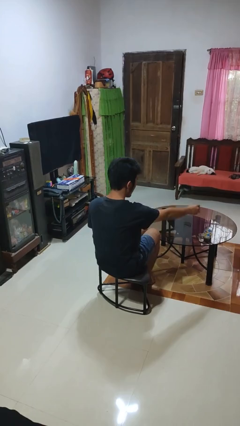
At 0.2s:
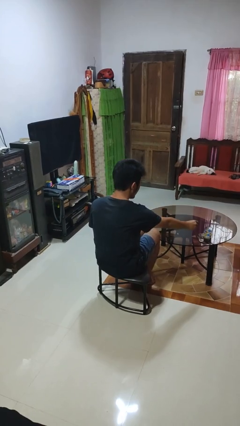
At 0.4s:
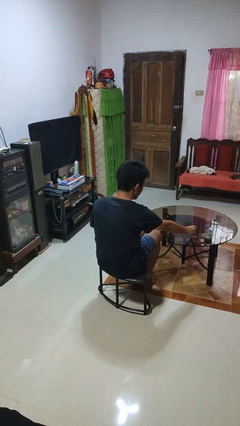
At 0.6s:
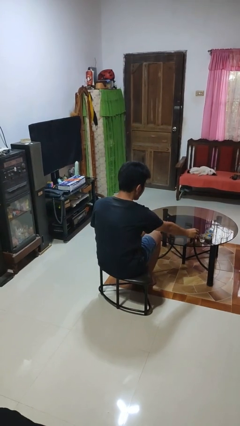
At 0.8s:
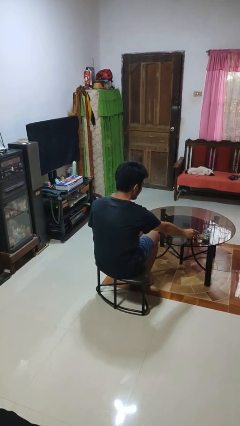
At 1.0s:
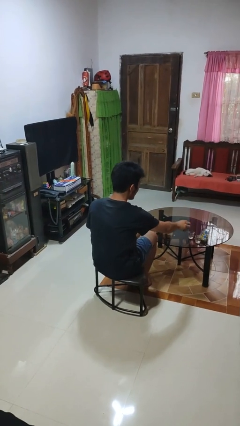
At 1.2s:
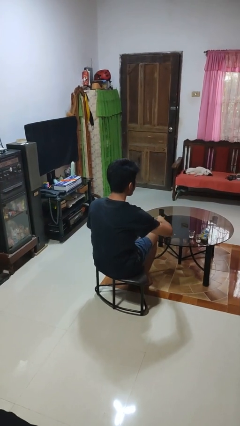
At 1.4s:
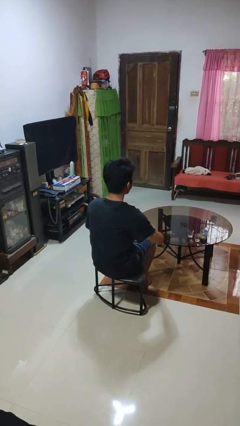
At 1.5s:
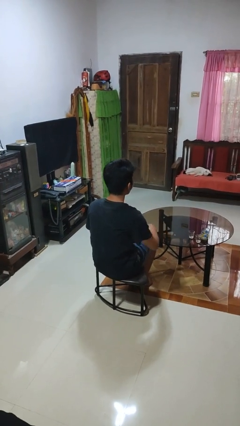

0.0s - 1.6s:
person puts down object on table

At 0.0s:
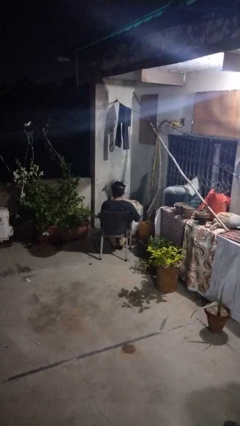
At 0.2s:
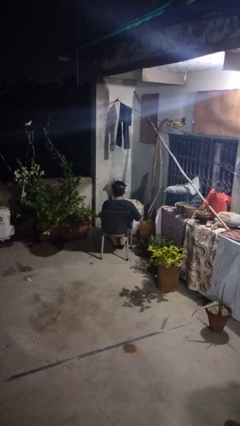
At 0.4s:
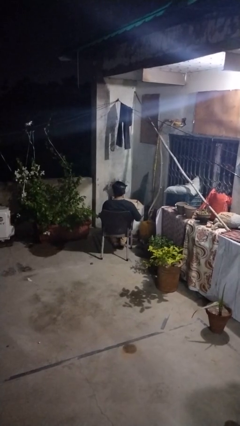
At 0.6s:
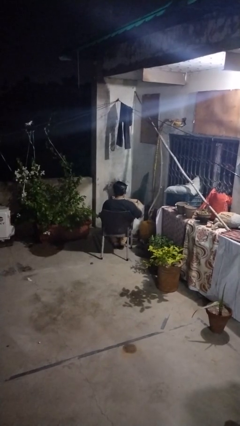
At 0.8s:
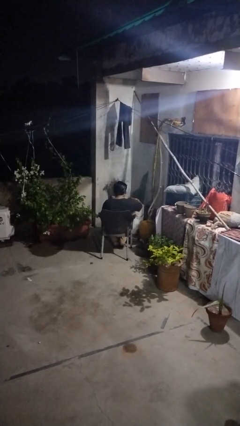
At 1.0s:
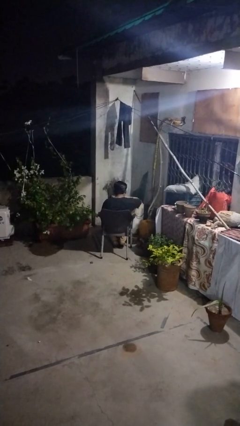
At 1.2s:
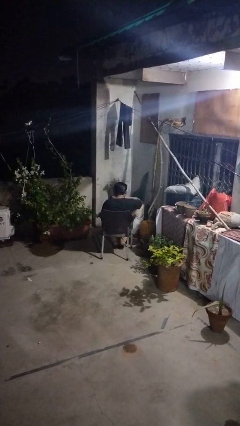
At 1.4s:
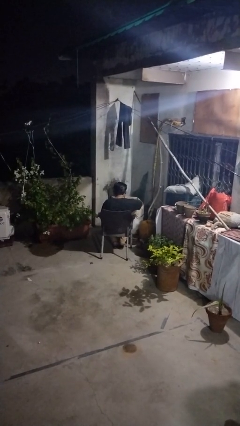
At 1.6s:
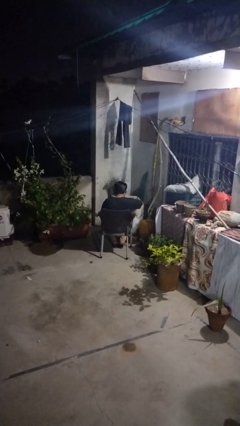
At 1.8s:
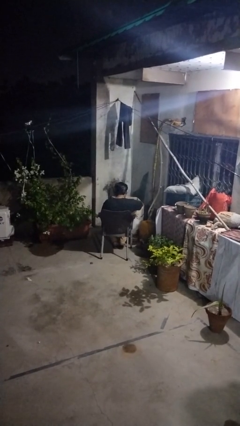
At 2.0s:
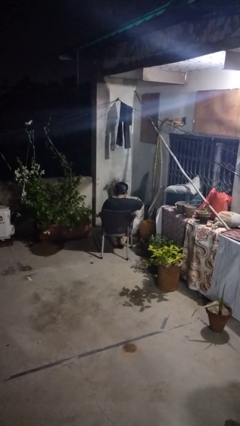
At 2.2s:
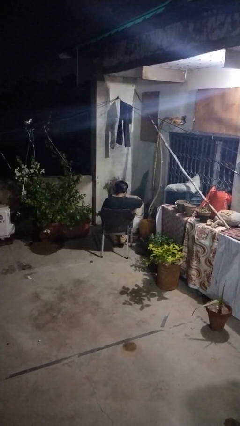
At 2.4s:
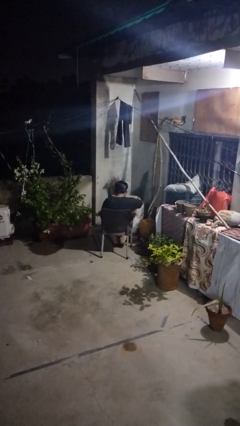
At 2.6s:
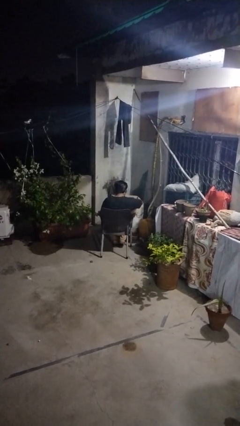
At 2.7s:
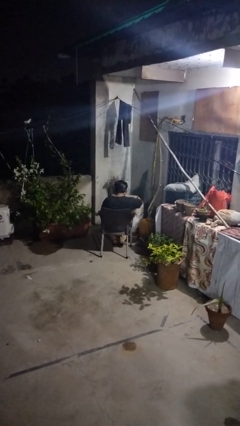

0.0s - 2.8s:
person searches in box

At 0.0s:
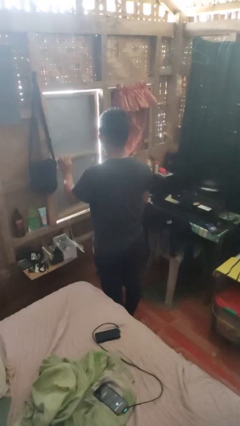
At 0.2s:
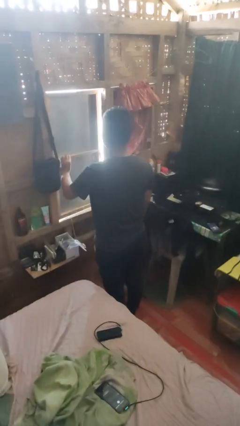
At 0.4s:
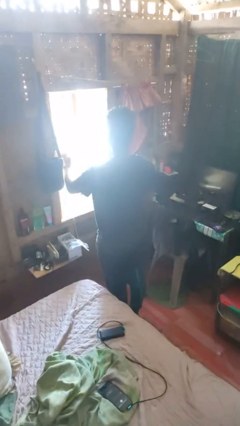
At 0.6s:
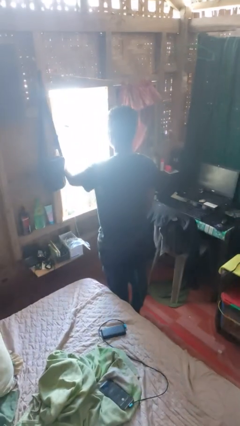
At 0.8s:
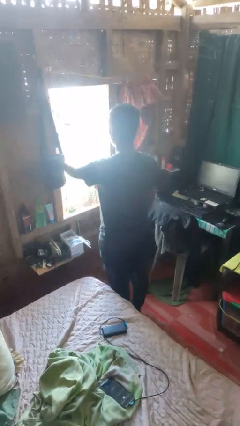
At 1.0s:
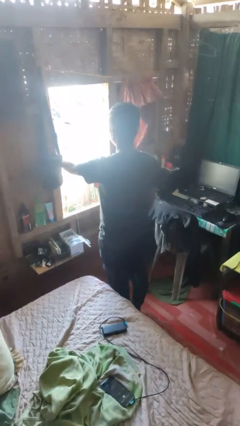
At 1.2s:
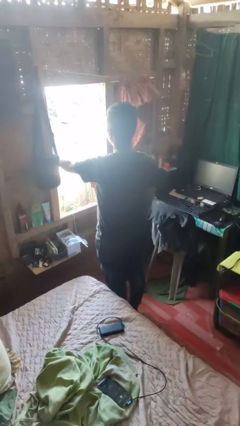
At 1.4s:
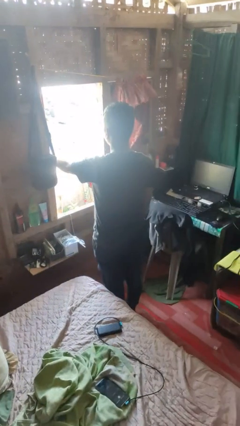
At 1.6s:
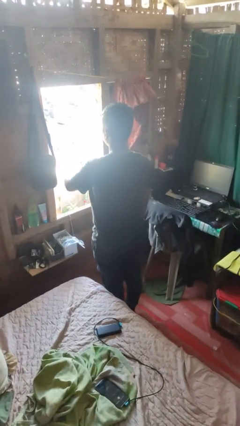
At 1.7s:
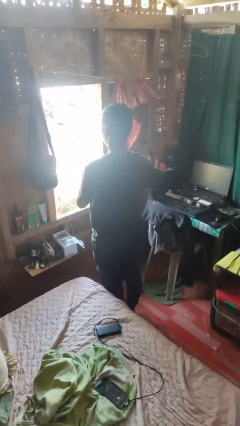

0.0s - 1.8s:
person opens home window

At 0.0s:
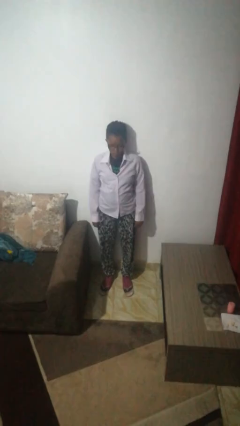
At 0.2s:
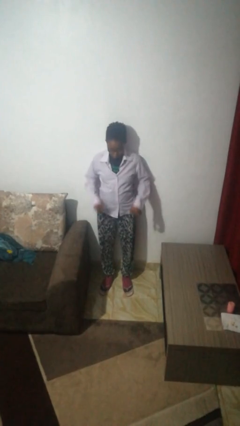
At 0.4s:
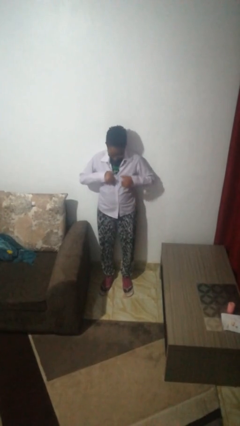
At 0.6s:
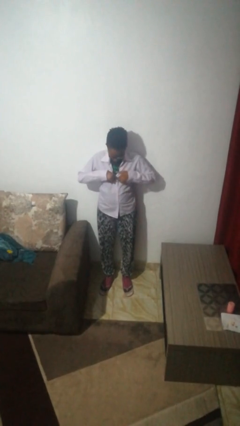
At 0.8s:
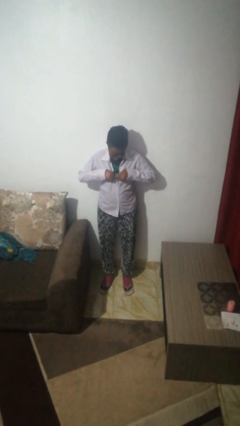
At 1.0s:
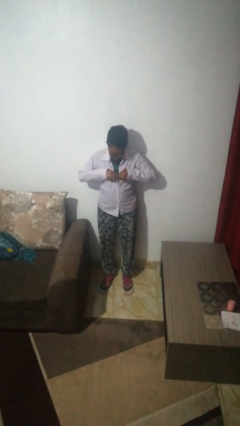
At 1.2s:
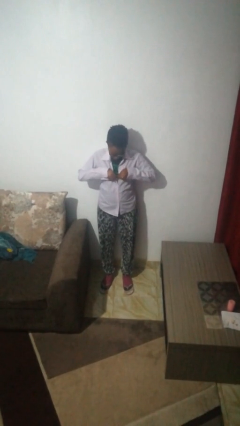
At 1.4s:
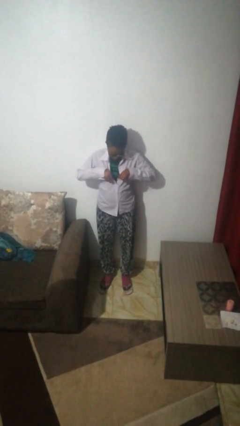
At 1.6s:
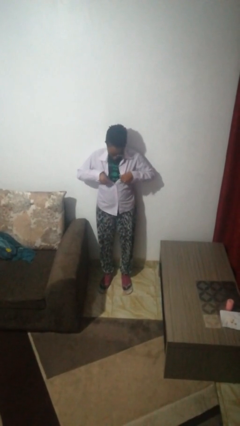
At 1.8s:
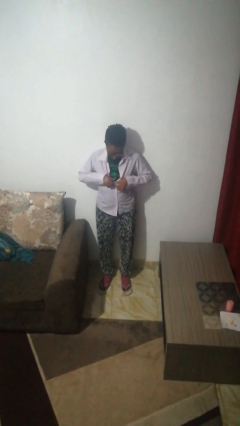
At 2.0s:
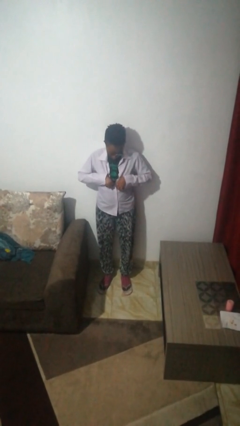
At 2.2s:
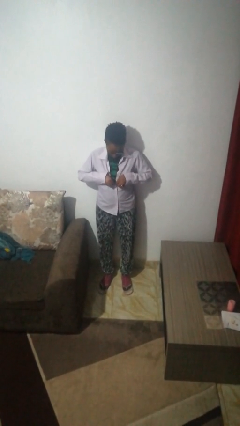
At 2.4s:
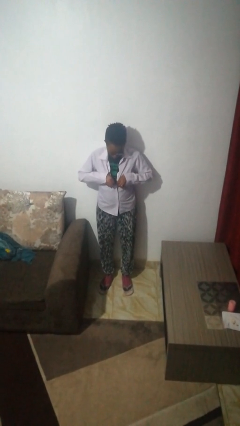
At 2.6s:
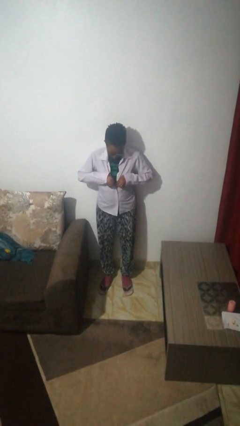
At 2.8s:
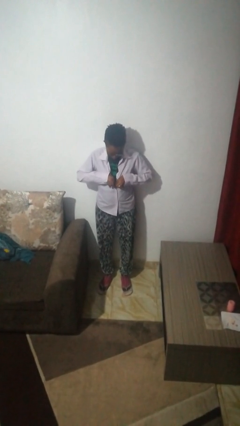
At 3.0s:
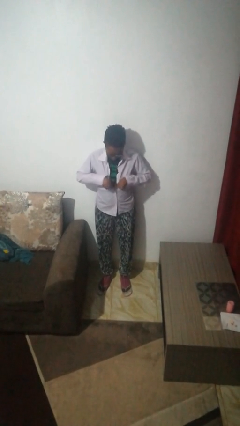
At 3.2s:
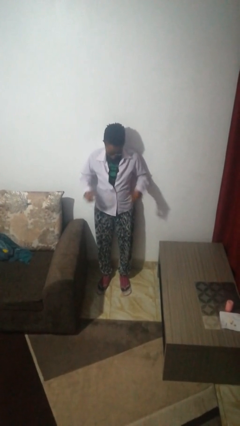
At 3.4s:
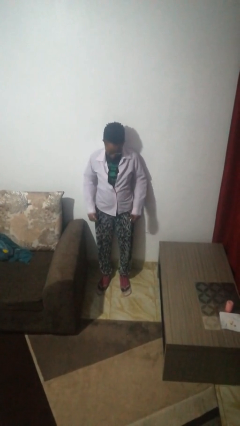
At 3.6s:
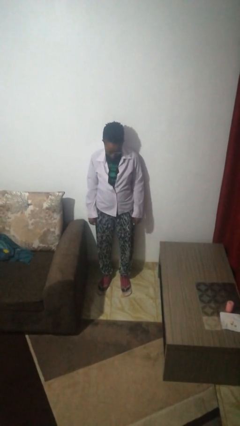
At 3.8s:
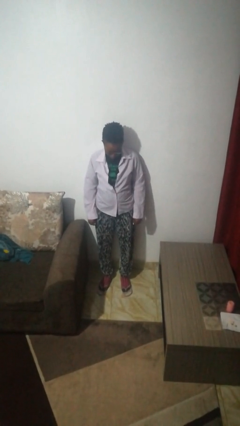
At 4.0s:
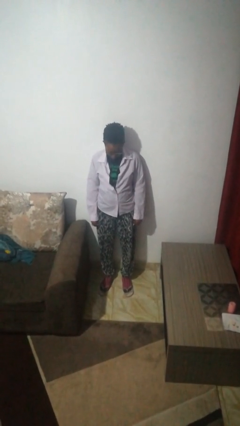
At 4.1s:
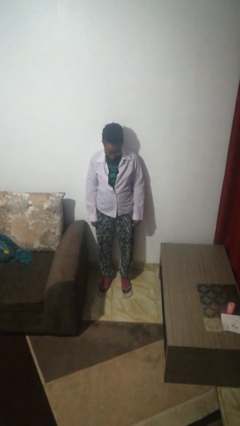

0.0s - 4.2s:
person unbuttons shirt

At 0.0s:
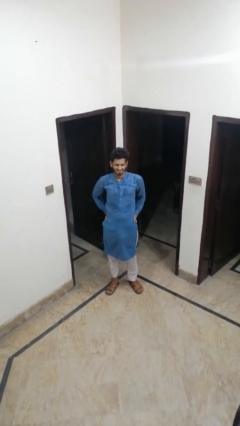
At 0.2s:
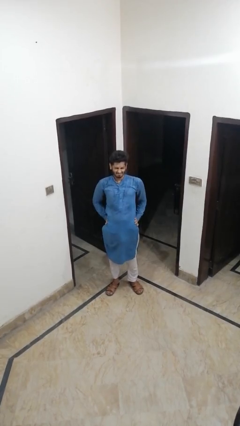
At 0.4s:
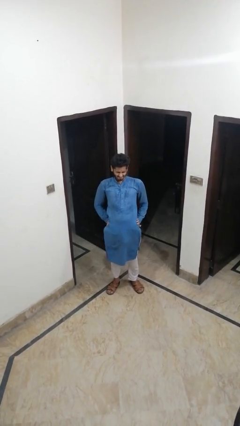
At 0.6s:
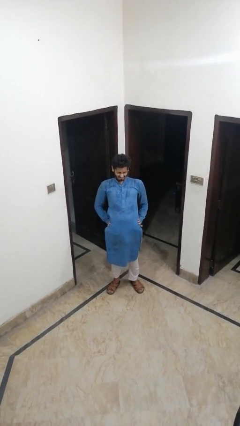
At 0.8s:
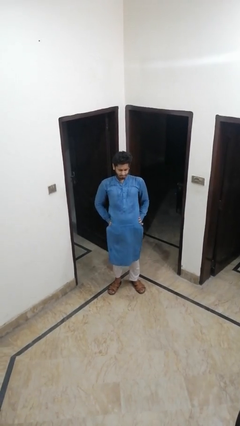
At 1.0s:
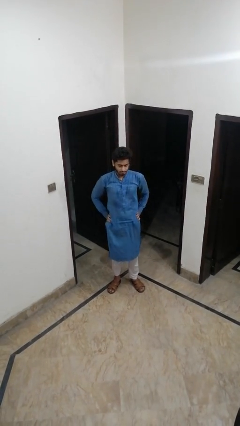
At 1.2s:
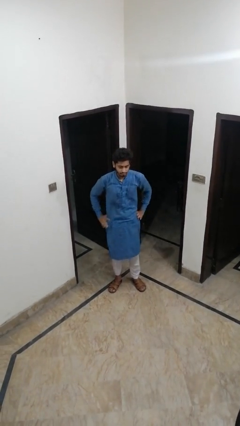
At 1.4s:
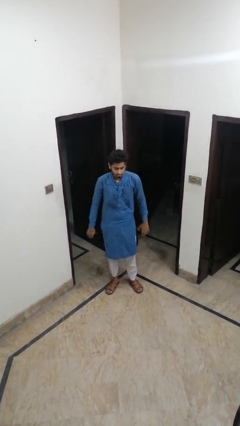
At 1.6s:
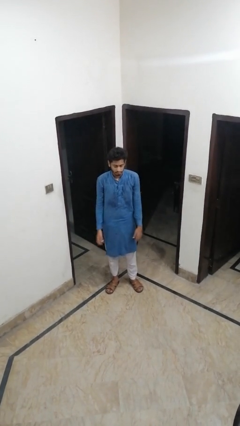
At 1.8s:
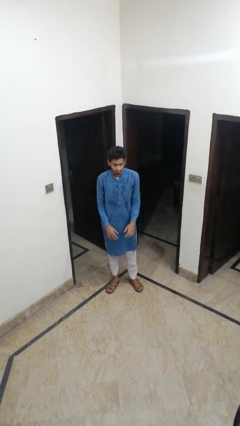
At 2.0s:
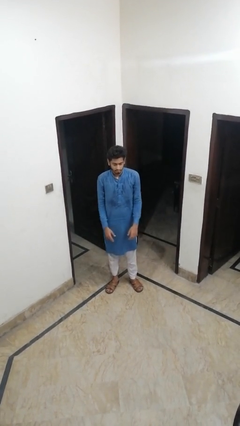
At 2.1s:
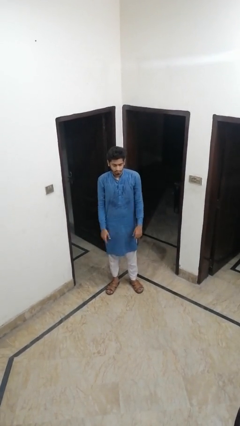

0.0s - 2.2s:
person stretches back

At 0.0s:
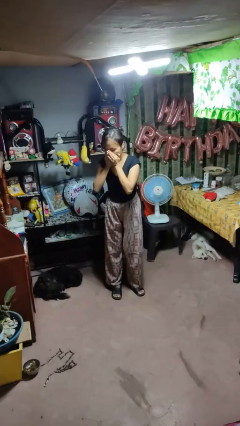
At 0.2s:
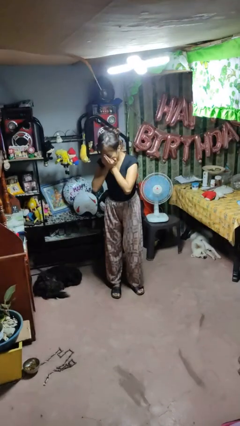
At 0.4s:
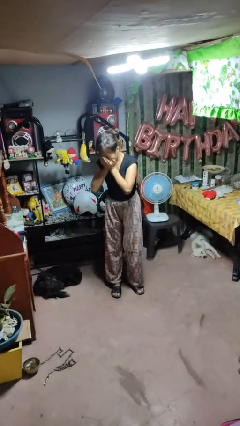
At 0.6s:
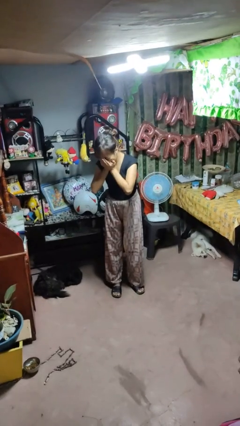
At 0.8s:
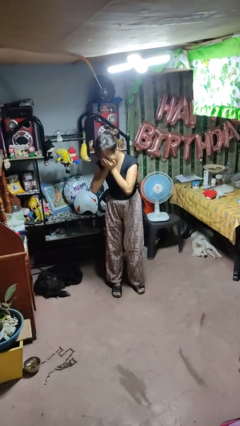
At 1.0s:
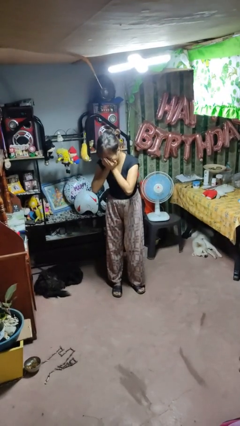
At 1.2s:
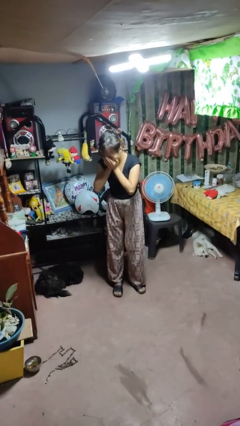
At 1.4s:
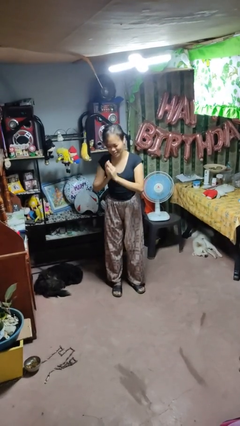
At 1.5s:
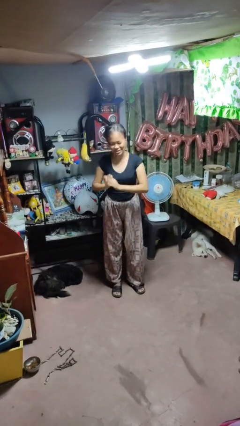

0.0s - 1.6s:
person sneezes into hand

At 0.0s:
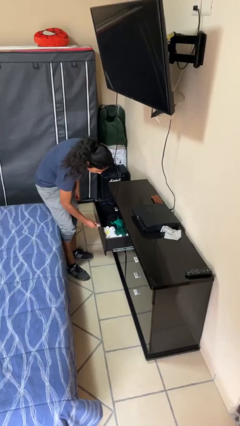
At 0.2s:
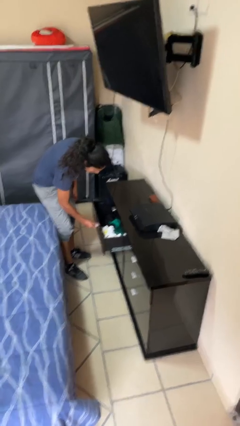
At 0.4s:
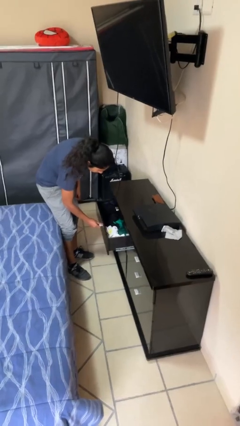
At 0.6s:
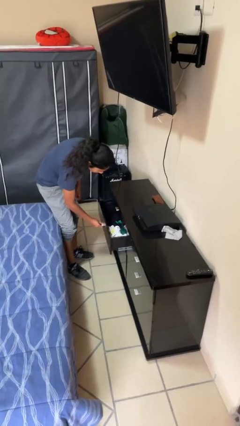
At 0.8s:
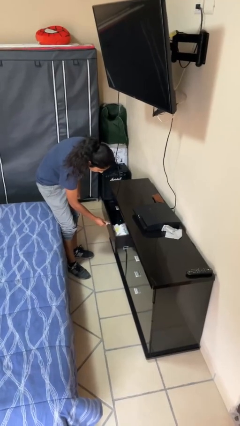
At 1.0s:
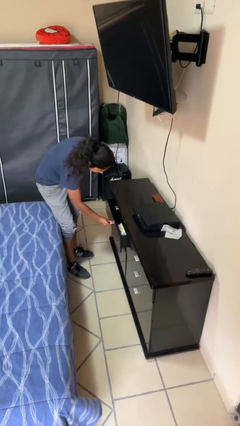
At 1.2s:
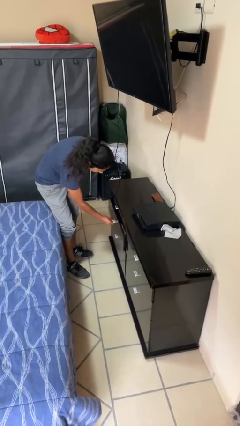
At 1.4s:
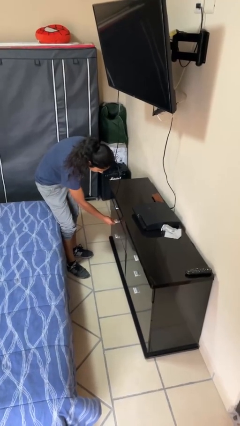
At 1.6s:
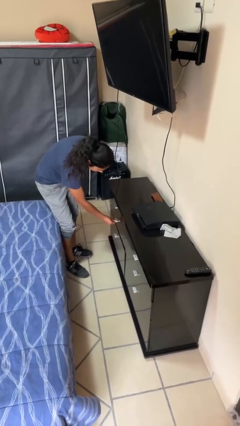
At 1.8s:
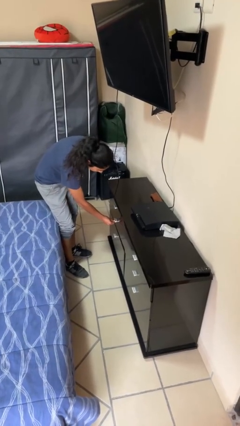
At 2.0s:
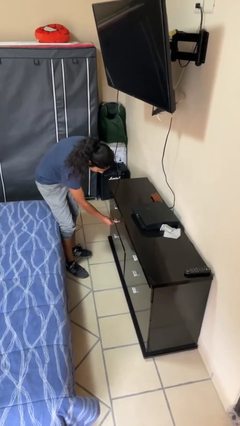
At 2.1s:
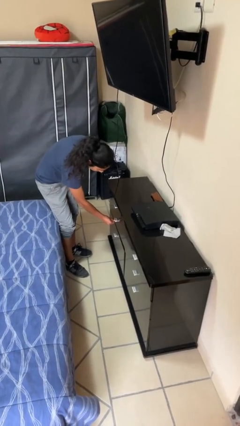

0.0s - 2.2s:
person closes dresser drawer

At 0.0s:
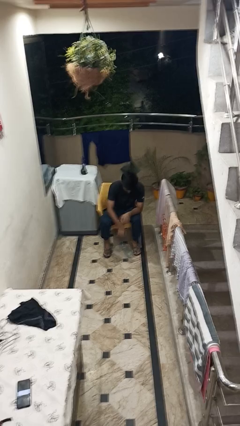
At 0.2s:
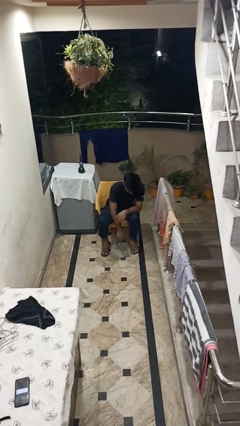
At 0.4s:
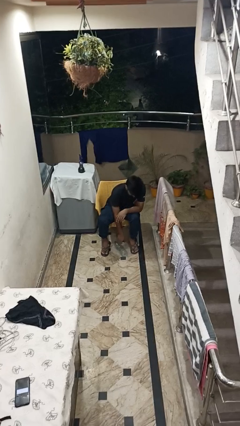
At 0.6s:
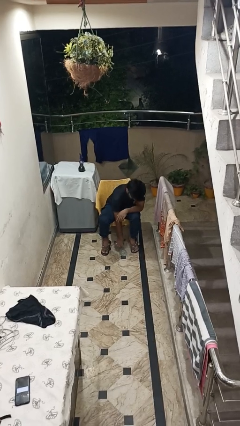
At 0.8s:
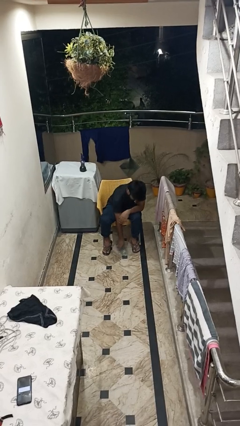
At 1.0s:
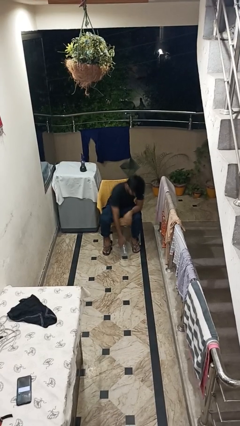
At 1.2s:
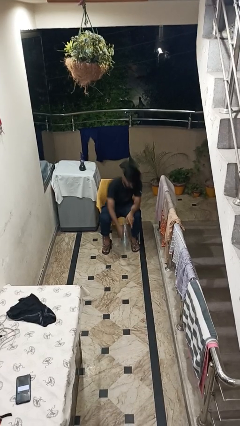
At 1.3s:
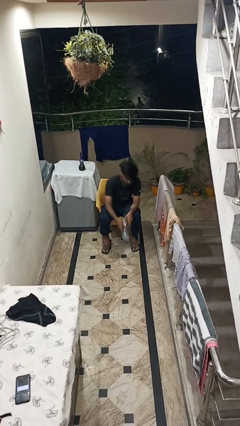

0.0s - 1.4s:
person picks up object from floor
